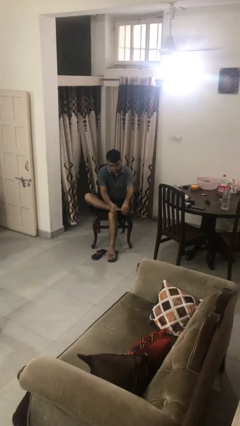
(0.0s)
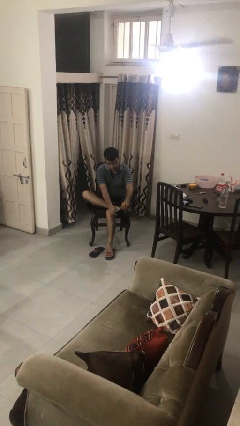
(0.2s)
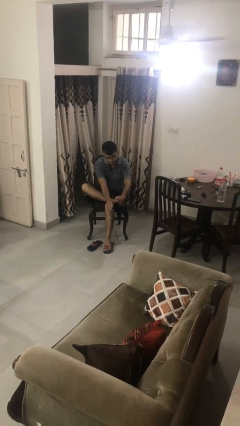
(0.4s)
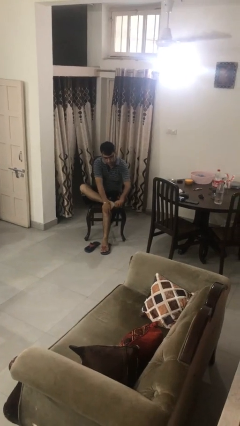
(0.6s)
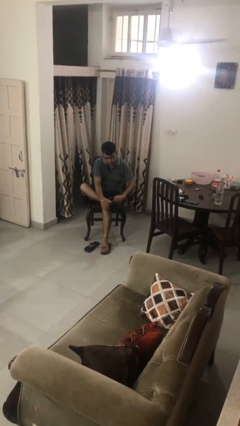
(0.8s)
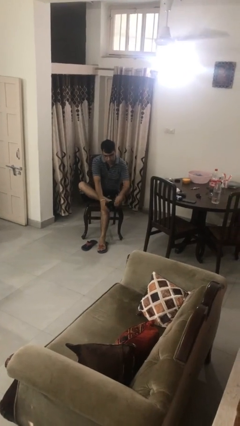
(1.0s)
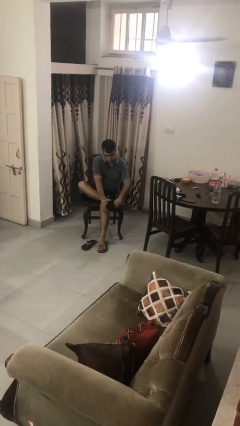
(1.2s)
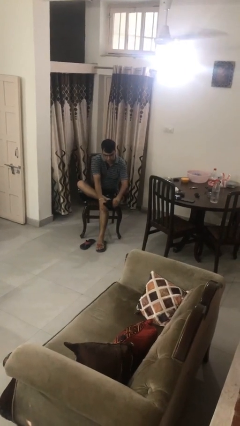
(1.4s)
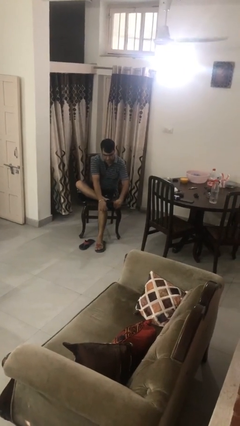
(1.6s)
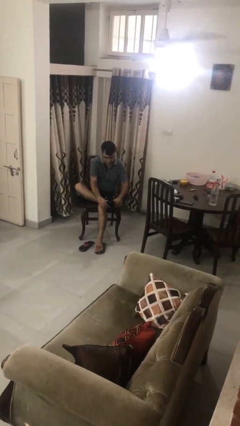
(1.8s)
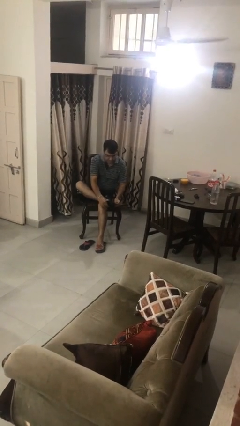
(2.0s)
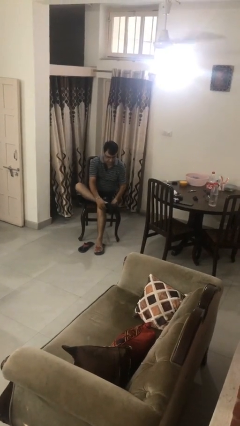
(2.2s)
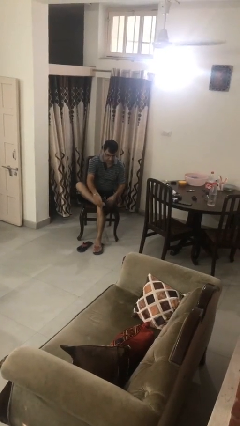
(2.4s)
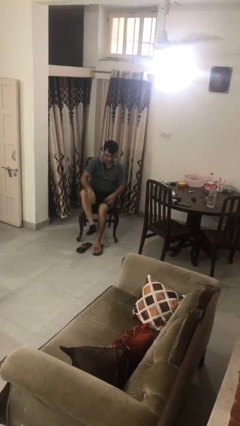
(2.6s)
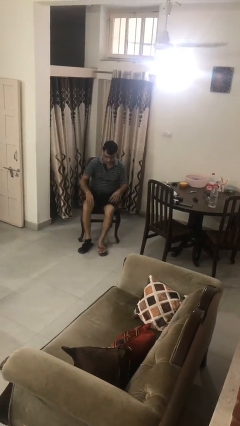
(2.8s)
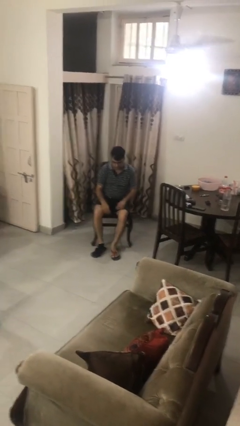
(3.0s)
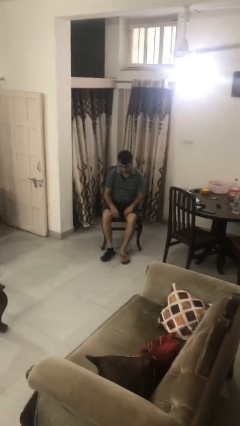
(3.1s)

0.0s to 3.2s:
person puts on socks

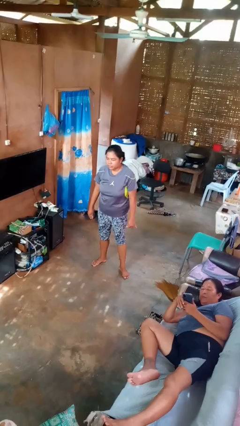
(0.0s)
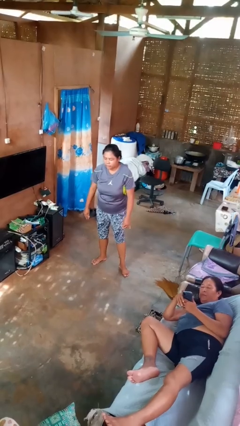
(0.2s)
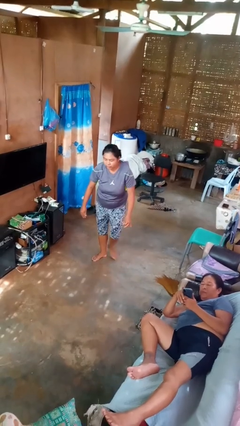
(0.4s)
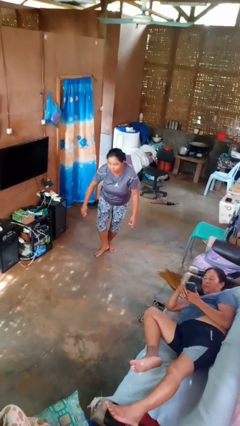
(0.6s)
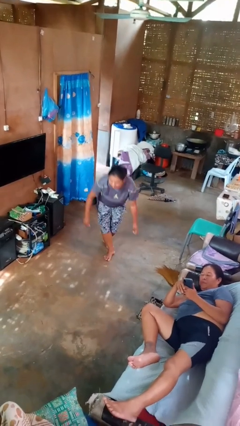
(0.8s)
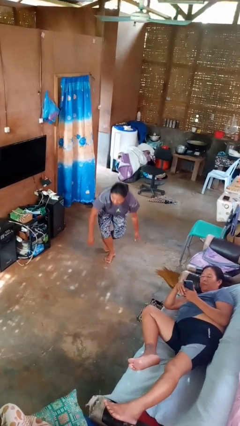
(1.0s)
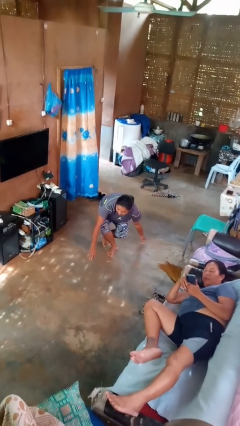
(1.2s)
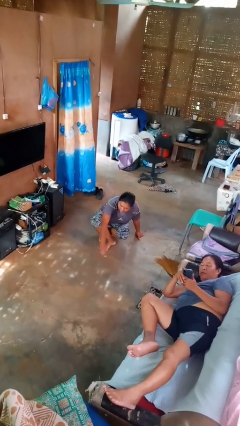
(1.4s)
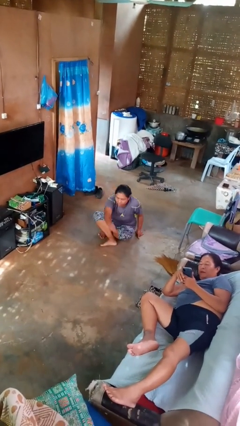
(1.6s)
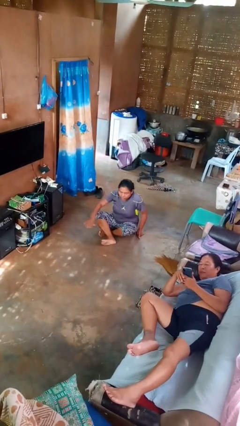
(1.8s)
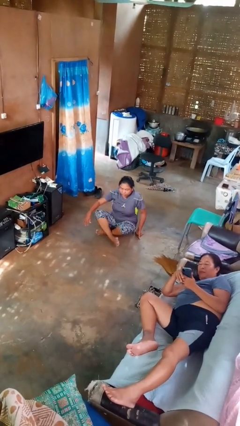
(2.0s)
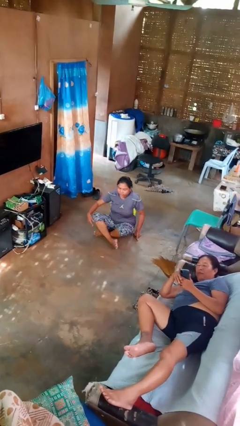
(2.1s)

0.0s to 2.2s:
person sits crisscross

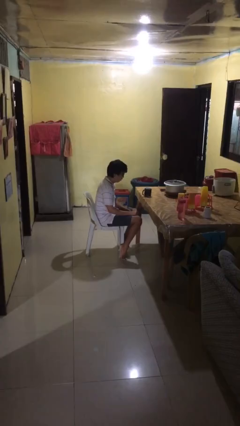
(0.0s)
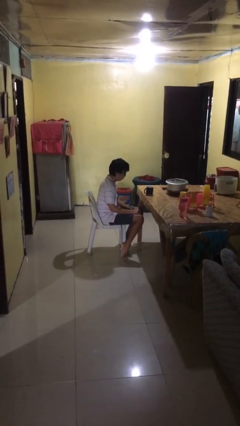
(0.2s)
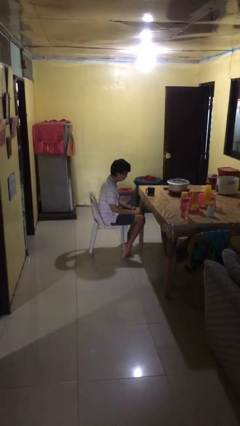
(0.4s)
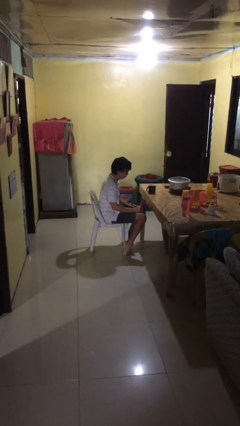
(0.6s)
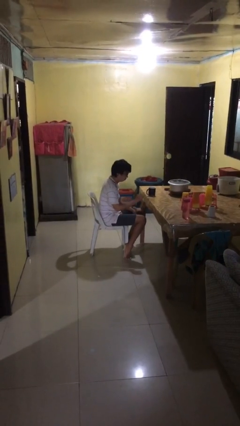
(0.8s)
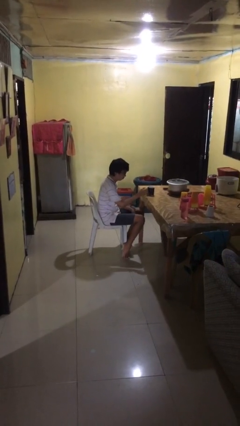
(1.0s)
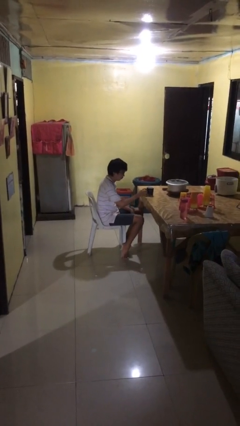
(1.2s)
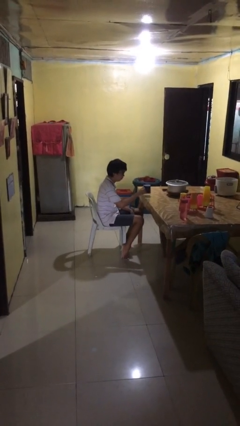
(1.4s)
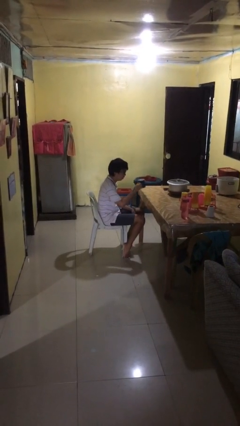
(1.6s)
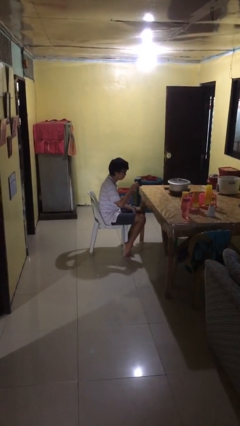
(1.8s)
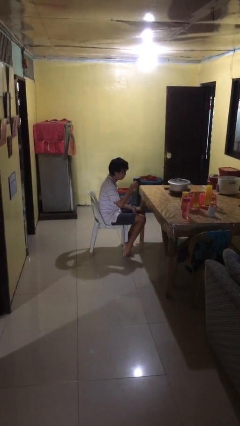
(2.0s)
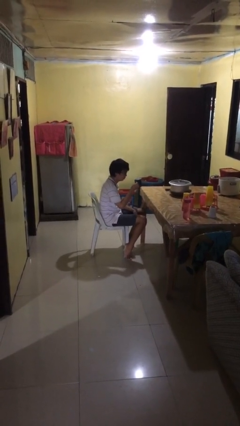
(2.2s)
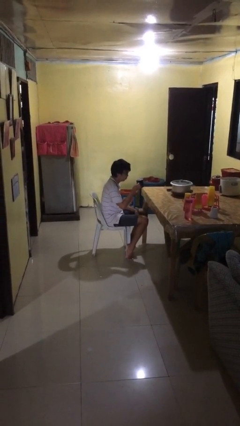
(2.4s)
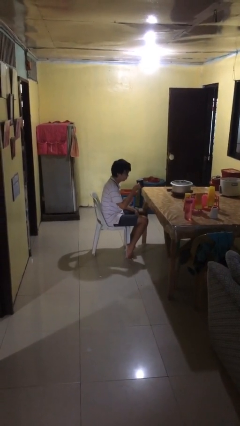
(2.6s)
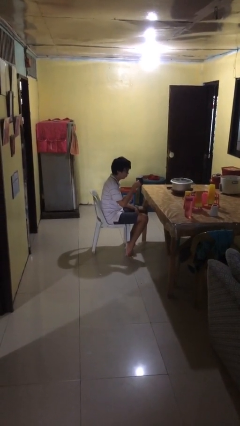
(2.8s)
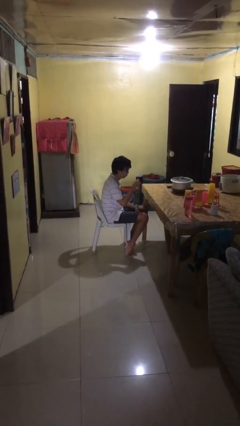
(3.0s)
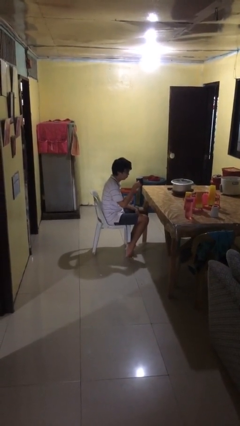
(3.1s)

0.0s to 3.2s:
person picks up object from table

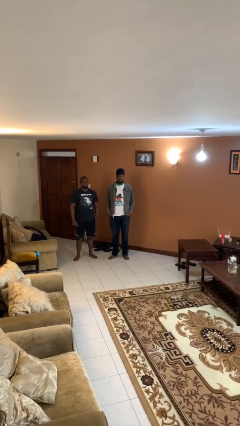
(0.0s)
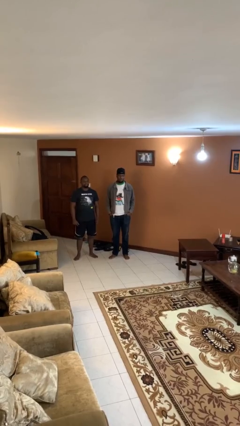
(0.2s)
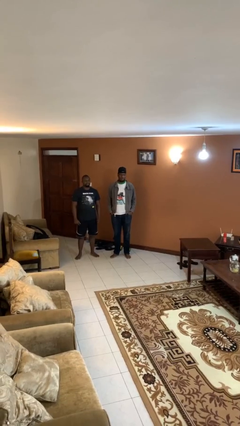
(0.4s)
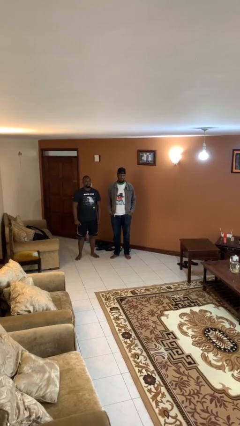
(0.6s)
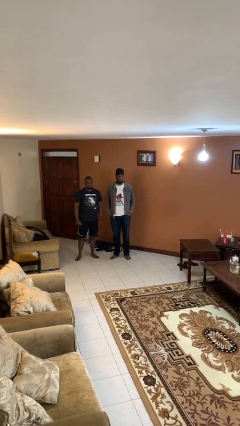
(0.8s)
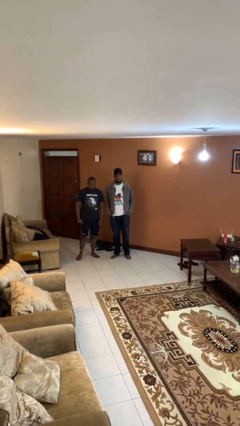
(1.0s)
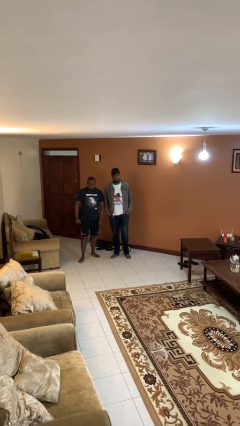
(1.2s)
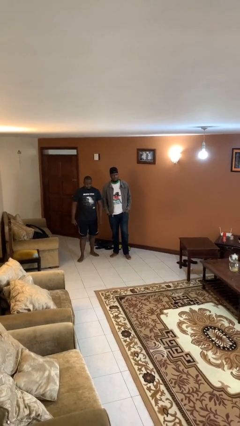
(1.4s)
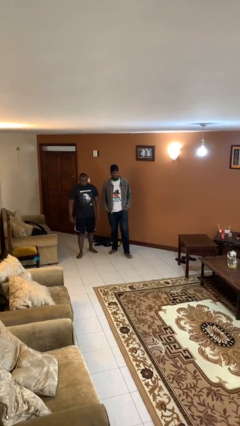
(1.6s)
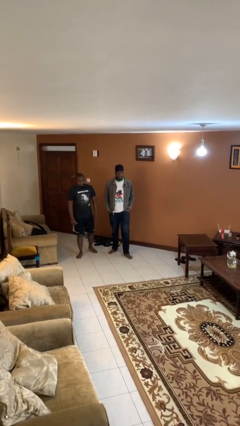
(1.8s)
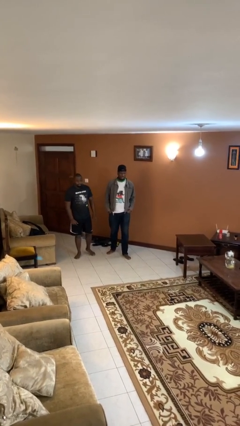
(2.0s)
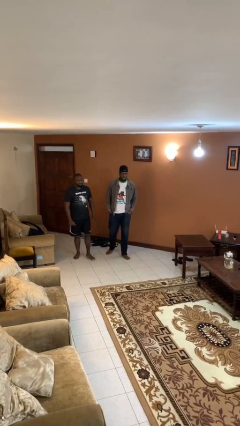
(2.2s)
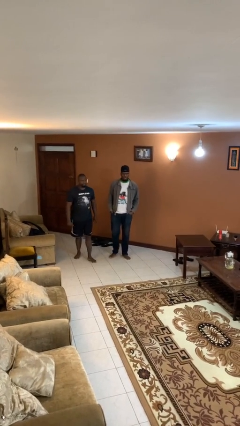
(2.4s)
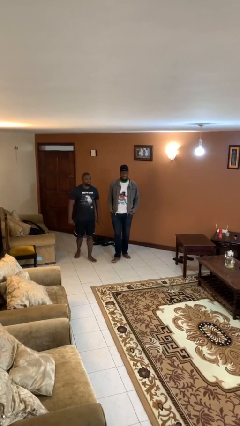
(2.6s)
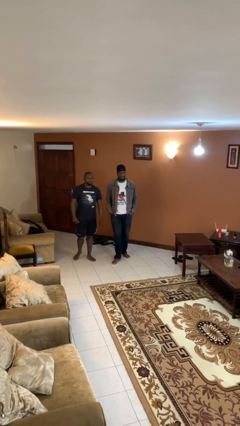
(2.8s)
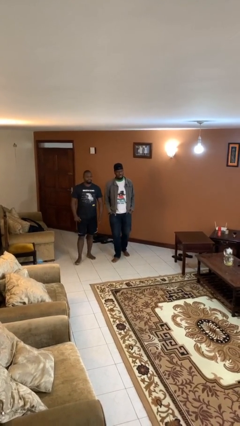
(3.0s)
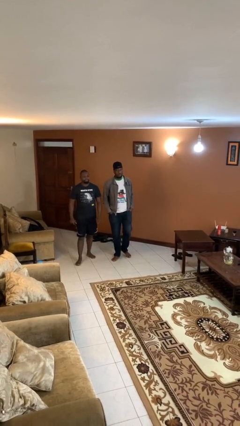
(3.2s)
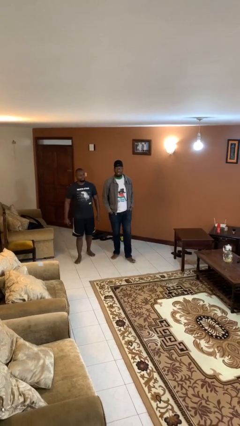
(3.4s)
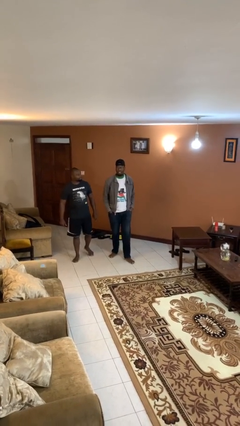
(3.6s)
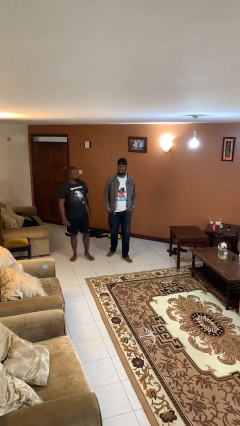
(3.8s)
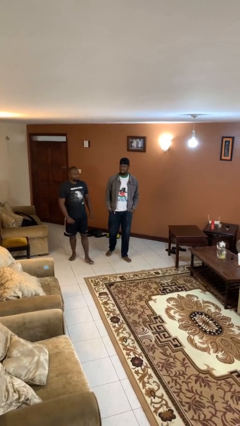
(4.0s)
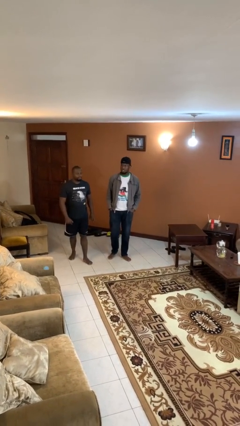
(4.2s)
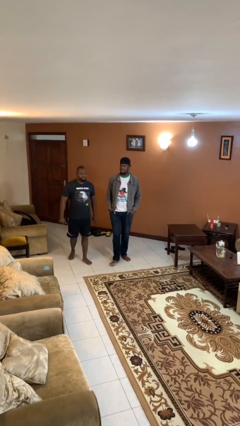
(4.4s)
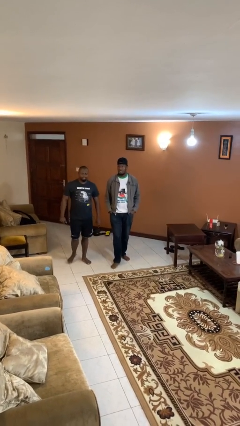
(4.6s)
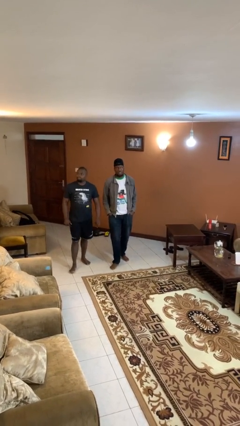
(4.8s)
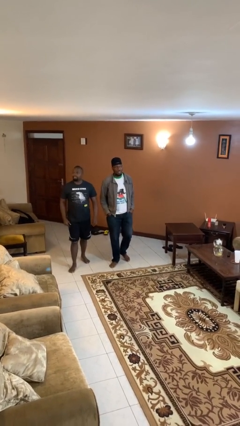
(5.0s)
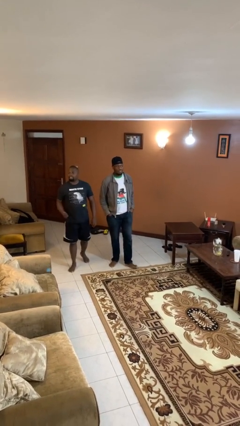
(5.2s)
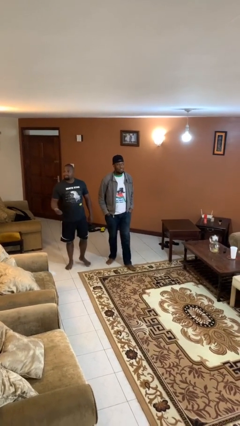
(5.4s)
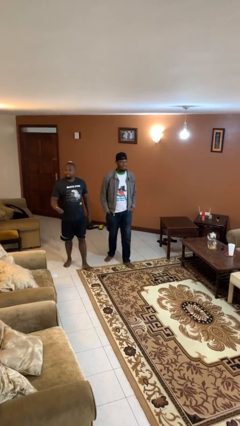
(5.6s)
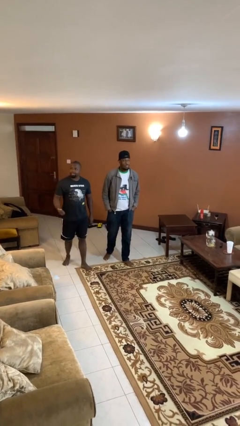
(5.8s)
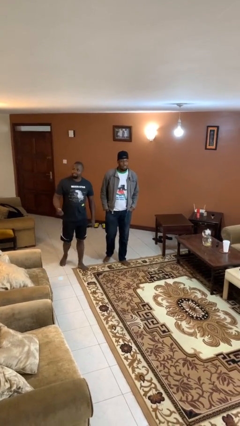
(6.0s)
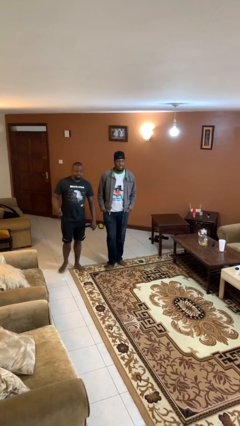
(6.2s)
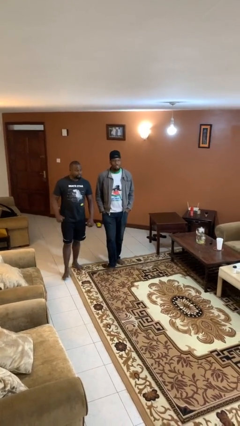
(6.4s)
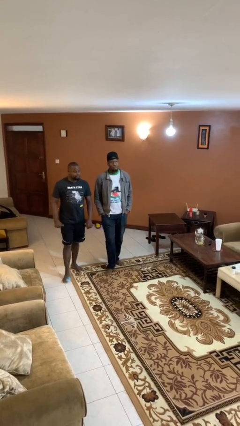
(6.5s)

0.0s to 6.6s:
person talks to person

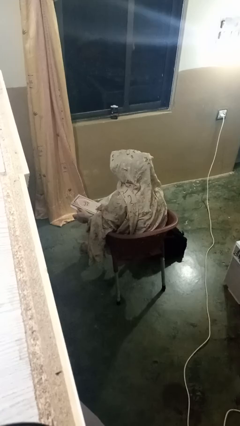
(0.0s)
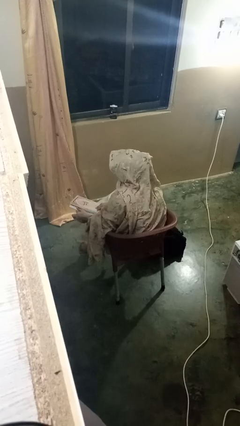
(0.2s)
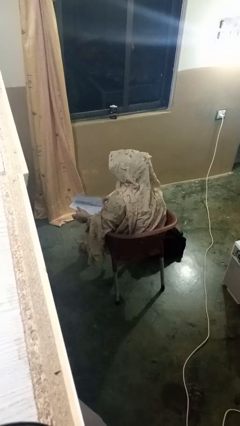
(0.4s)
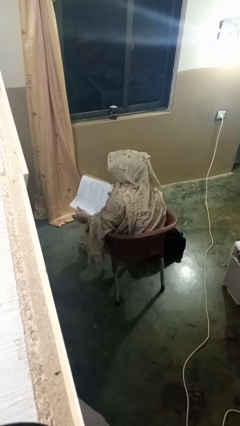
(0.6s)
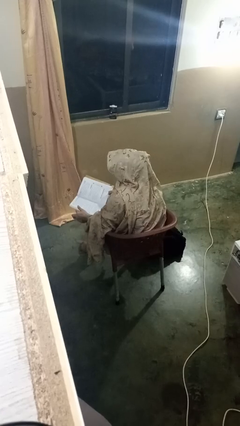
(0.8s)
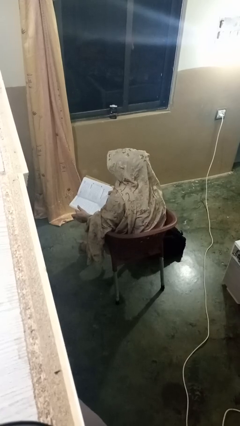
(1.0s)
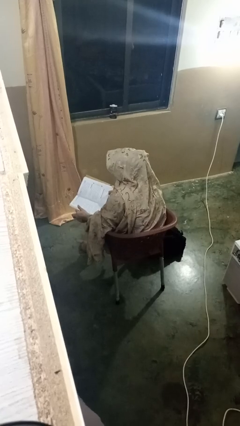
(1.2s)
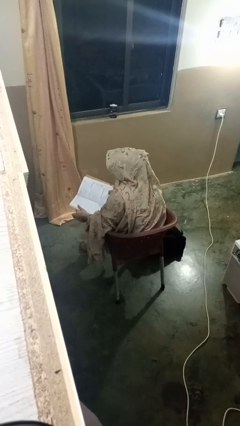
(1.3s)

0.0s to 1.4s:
person reads book

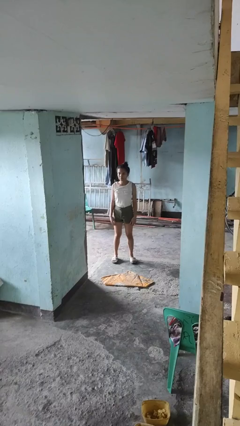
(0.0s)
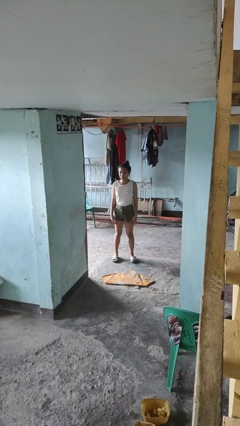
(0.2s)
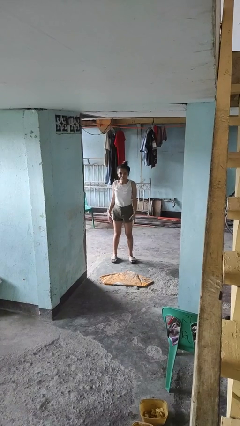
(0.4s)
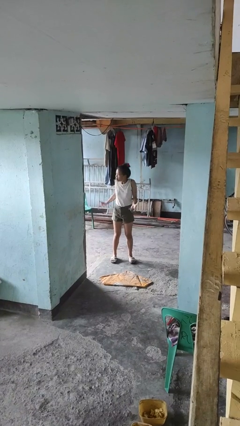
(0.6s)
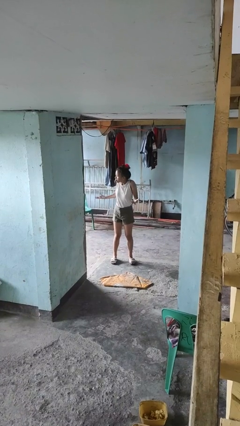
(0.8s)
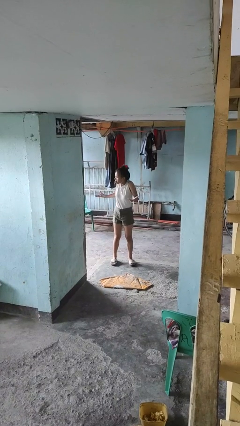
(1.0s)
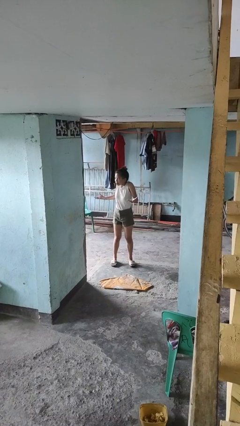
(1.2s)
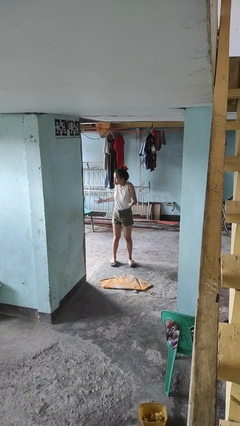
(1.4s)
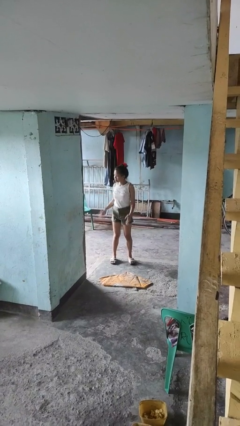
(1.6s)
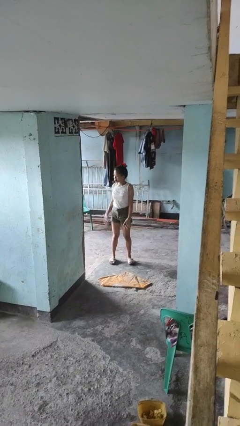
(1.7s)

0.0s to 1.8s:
person shrugs
